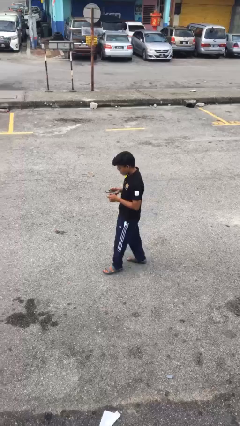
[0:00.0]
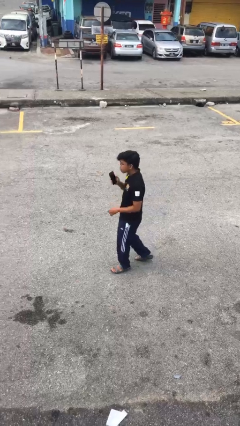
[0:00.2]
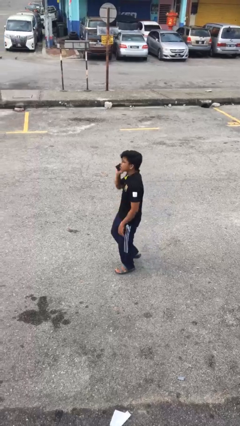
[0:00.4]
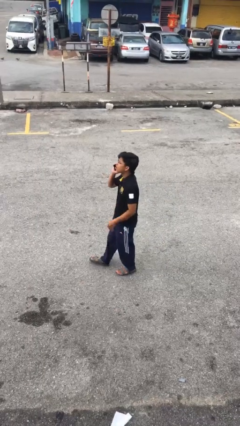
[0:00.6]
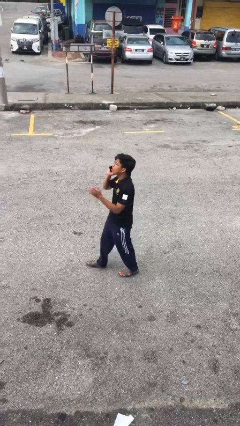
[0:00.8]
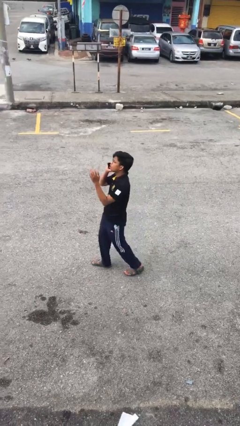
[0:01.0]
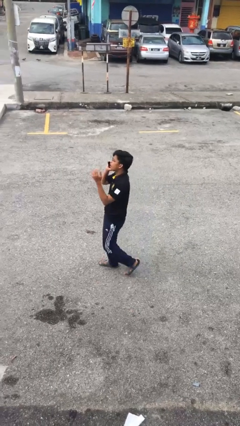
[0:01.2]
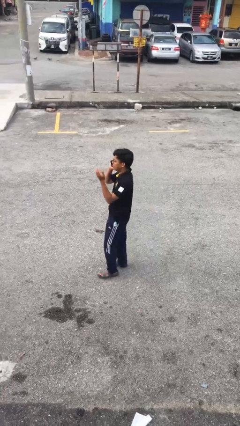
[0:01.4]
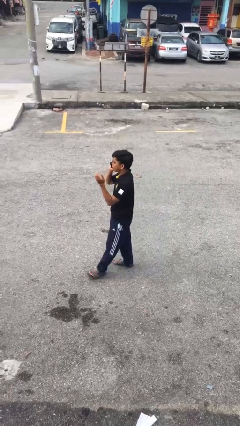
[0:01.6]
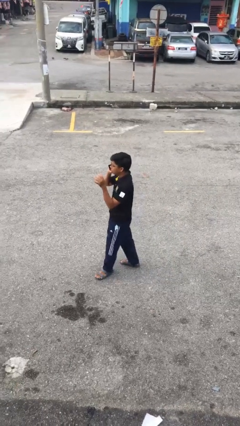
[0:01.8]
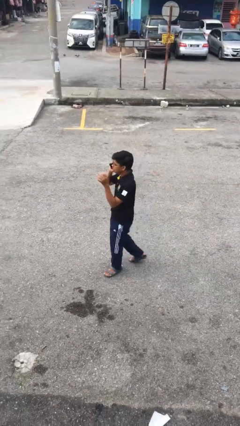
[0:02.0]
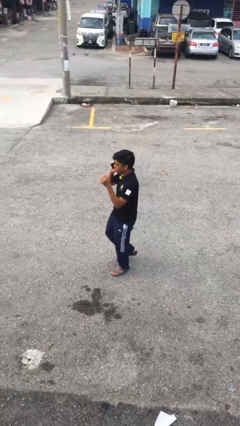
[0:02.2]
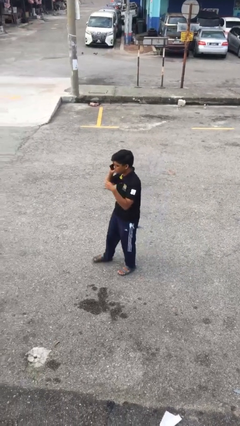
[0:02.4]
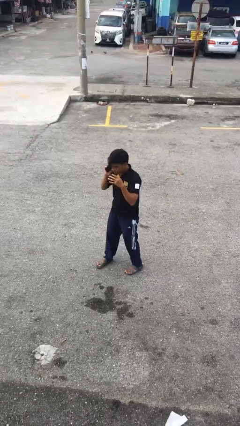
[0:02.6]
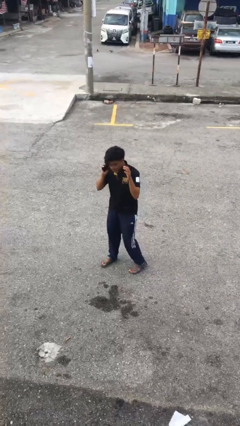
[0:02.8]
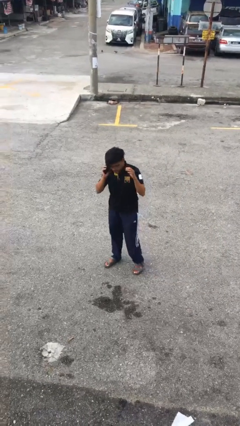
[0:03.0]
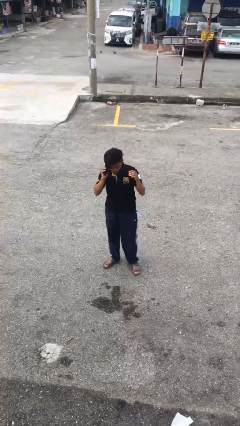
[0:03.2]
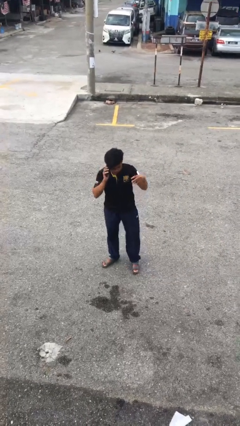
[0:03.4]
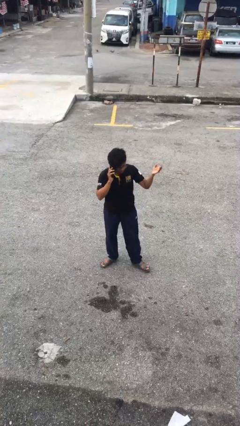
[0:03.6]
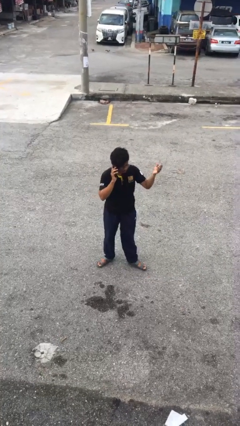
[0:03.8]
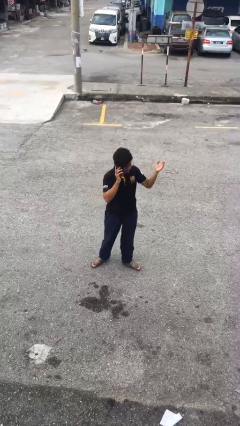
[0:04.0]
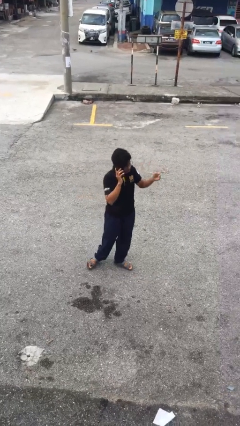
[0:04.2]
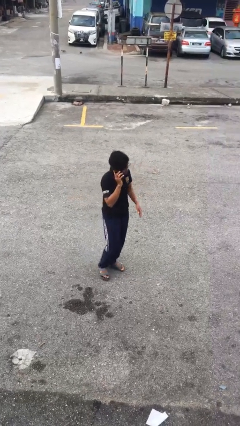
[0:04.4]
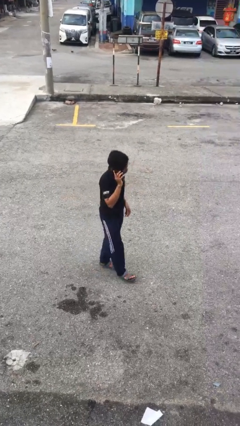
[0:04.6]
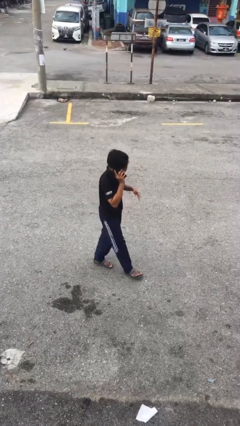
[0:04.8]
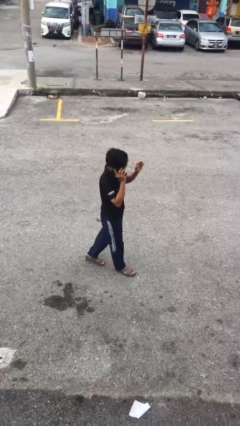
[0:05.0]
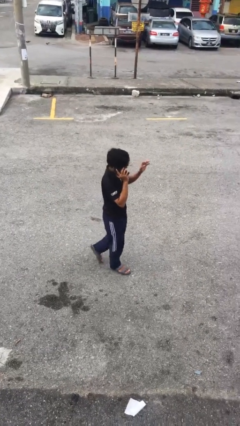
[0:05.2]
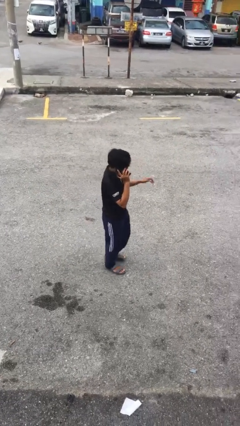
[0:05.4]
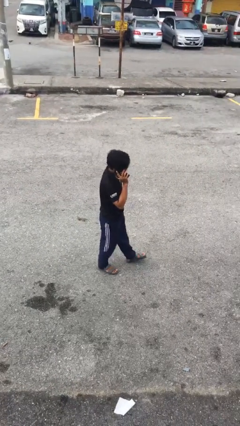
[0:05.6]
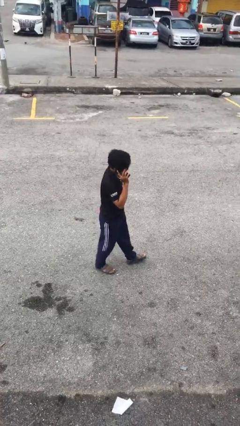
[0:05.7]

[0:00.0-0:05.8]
person talks on phone

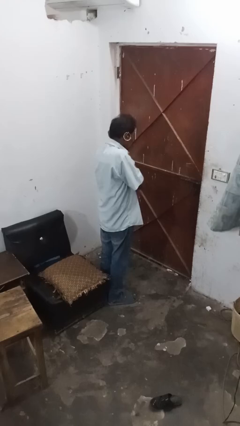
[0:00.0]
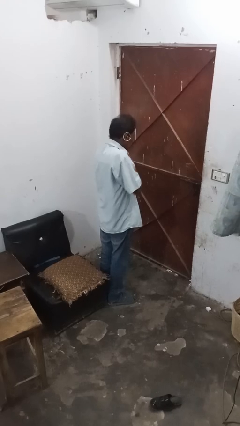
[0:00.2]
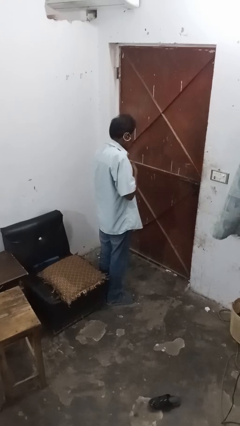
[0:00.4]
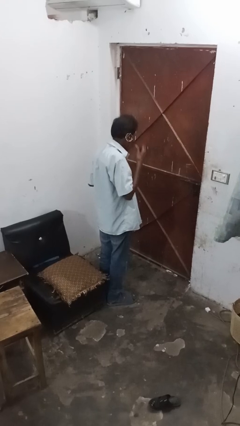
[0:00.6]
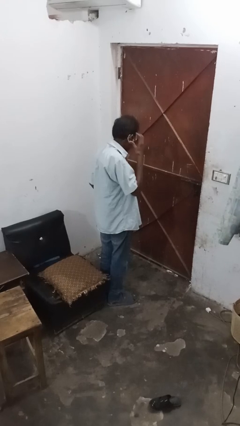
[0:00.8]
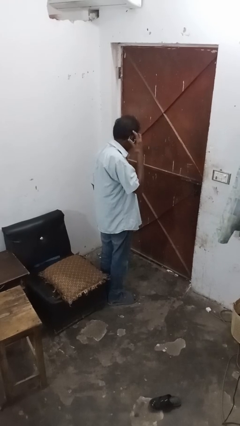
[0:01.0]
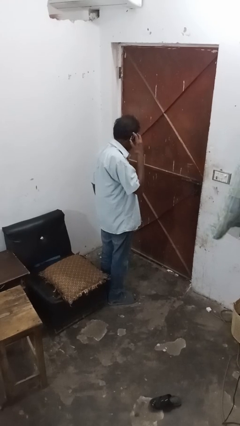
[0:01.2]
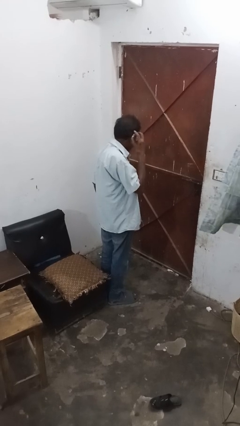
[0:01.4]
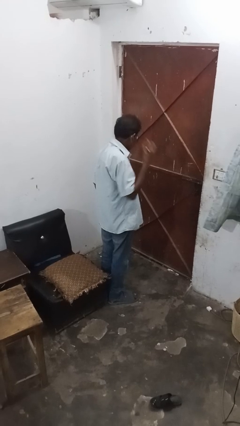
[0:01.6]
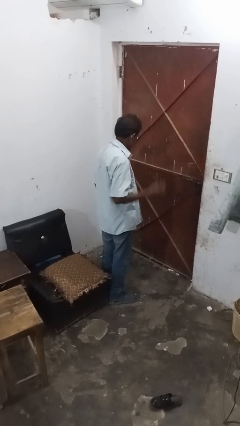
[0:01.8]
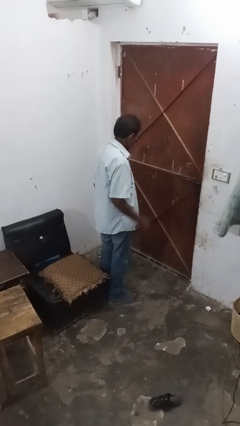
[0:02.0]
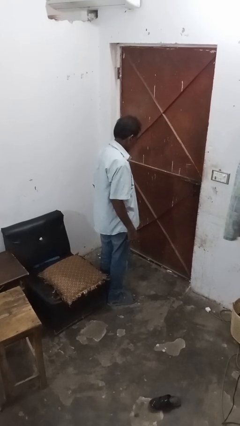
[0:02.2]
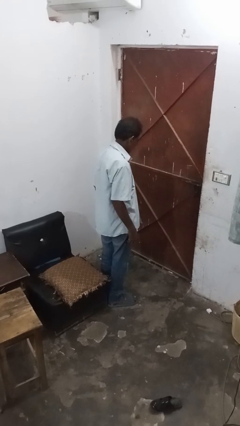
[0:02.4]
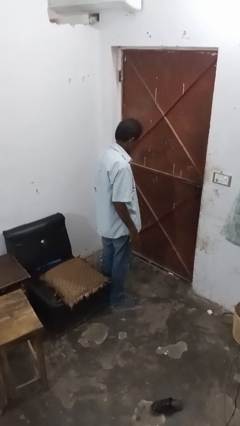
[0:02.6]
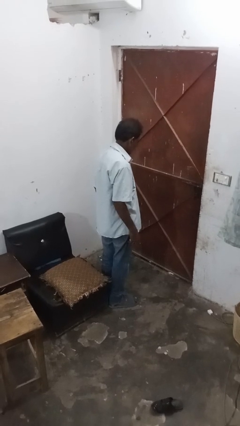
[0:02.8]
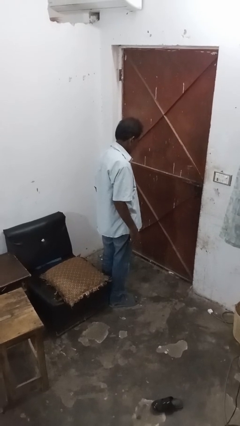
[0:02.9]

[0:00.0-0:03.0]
person takes off earrings

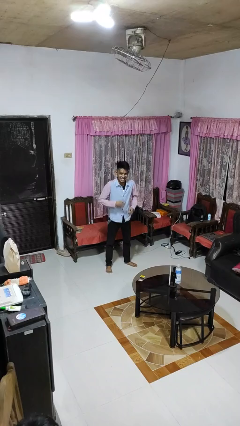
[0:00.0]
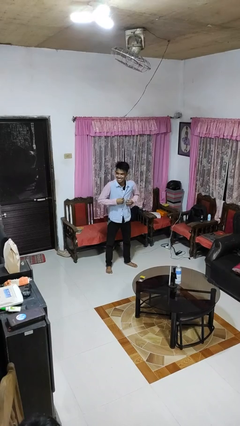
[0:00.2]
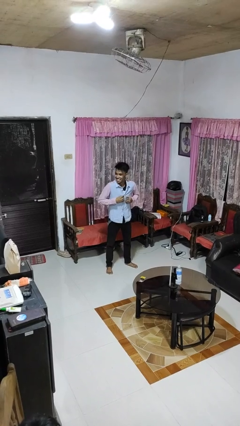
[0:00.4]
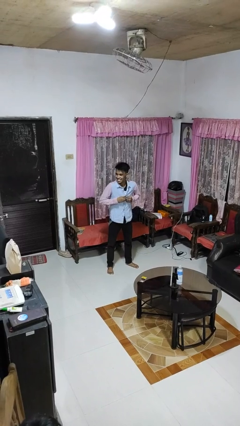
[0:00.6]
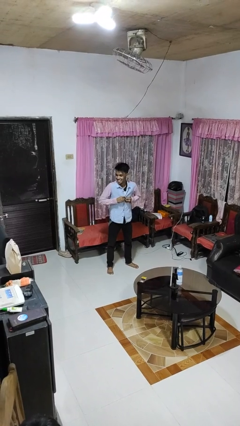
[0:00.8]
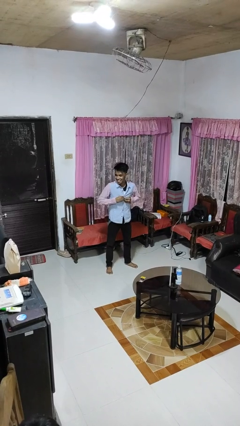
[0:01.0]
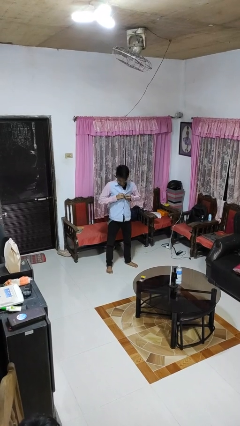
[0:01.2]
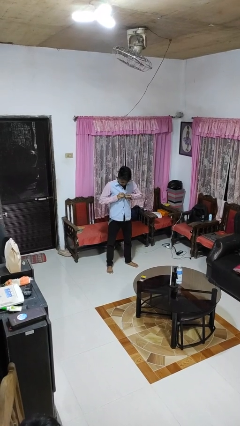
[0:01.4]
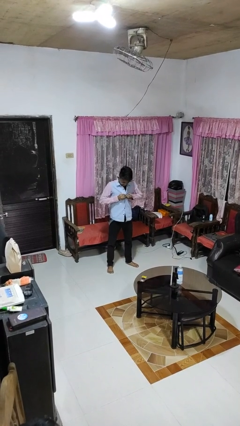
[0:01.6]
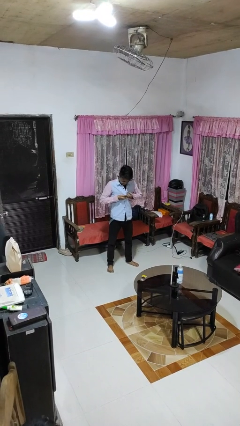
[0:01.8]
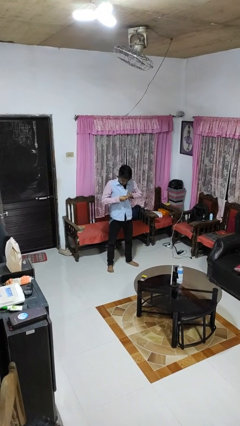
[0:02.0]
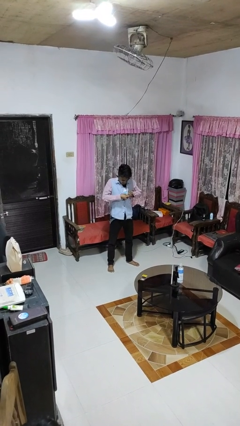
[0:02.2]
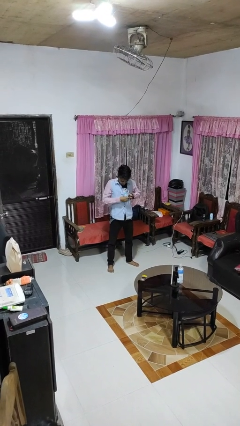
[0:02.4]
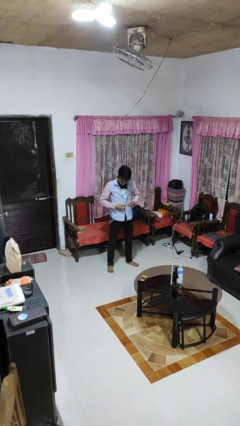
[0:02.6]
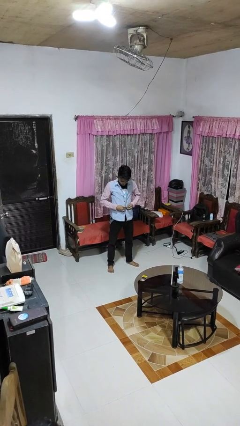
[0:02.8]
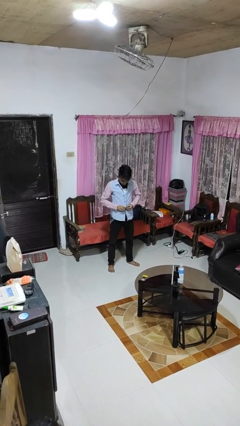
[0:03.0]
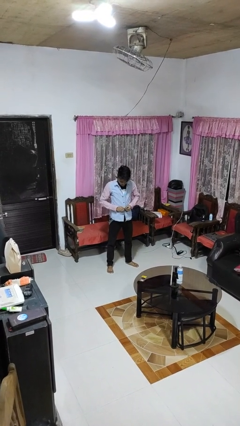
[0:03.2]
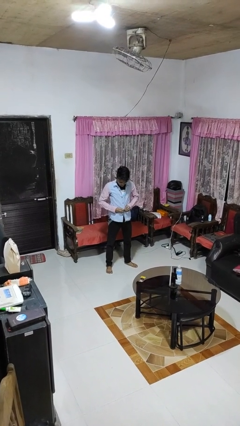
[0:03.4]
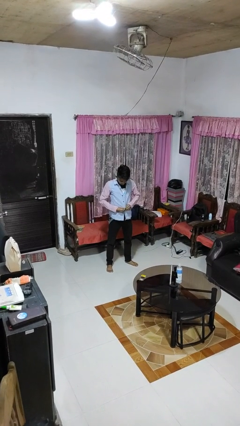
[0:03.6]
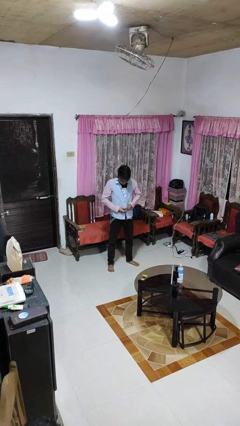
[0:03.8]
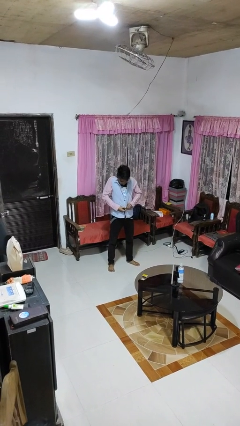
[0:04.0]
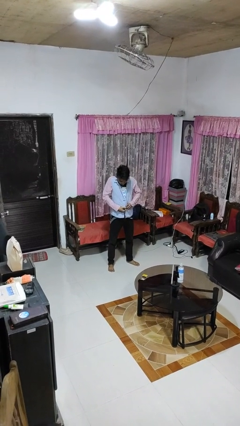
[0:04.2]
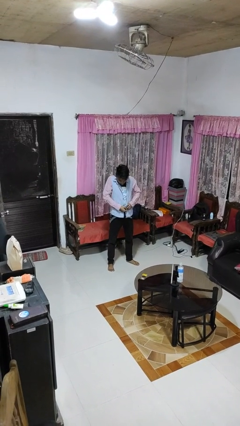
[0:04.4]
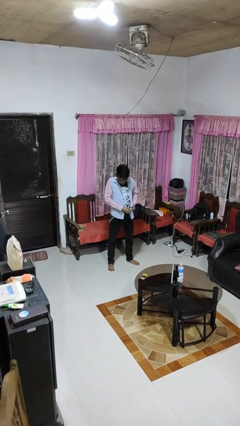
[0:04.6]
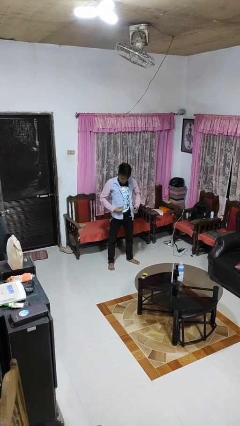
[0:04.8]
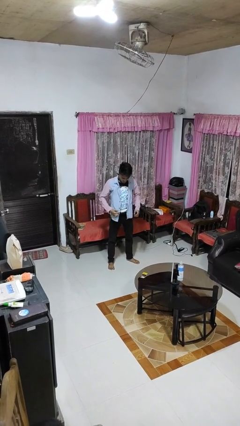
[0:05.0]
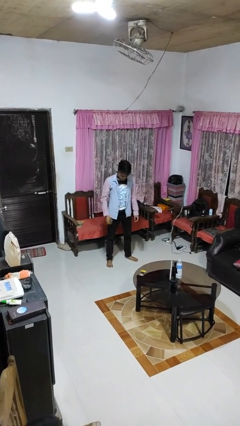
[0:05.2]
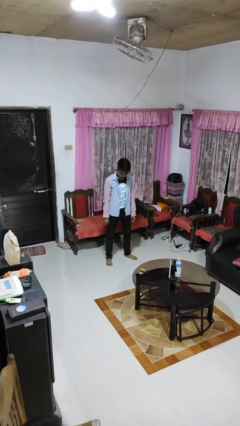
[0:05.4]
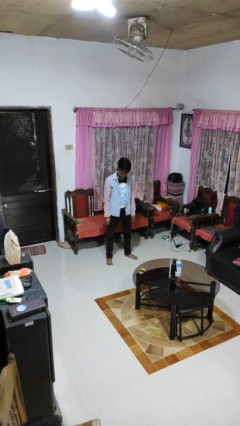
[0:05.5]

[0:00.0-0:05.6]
person unbuttons shirt

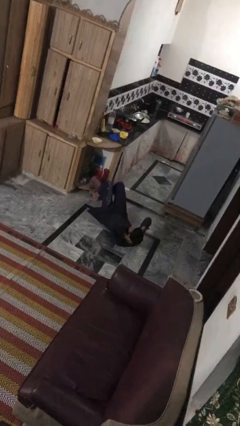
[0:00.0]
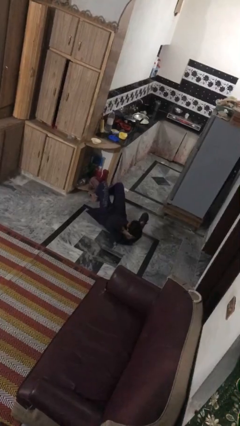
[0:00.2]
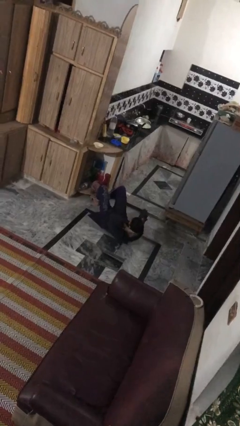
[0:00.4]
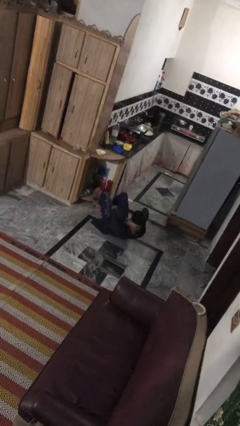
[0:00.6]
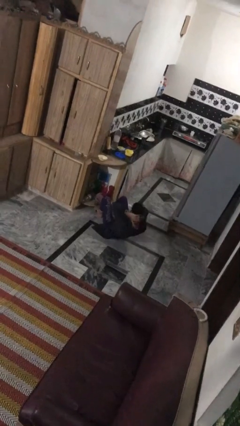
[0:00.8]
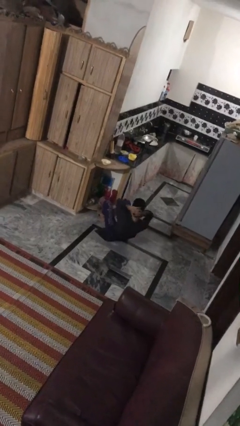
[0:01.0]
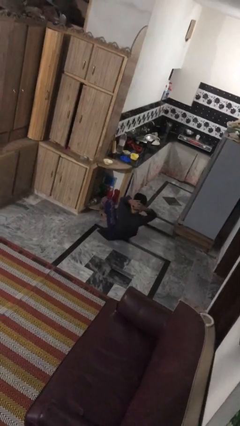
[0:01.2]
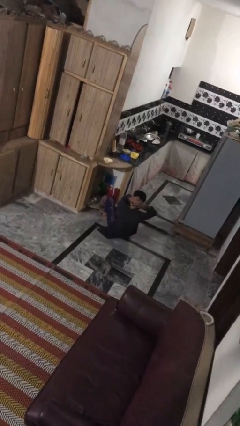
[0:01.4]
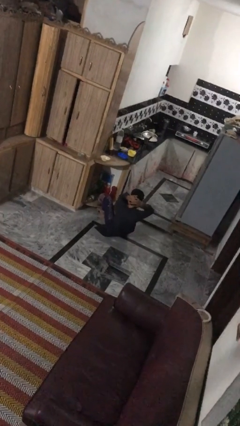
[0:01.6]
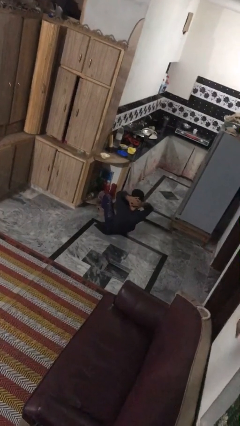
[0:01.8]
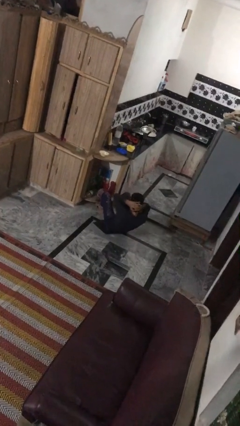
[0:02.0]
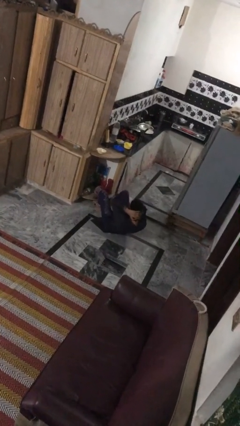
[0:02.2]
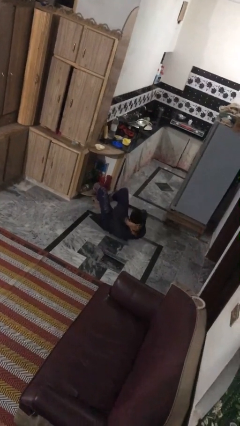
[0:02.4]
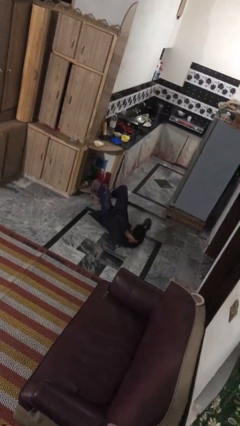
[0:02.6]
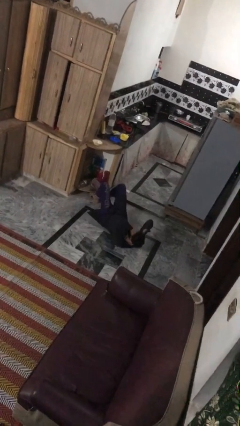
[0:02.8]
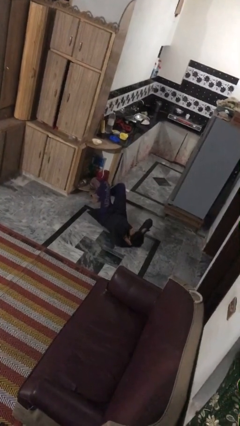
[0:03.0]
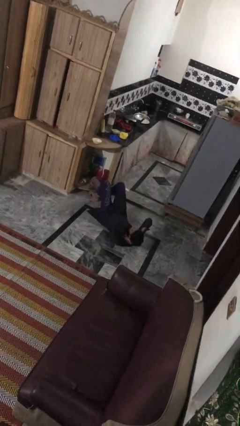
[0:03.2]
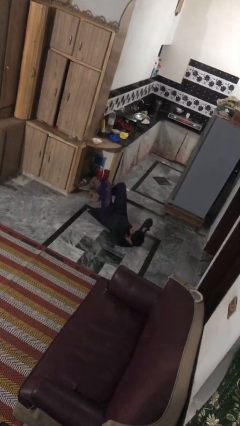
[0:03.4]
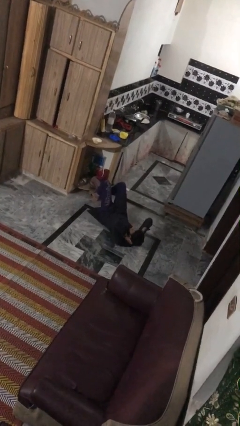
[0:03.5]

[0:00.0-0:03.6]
person exercises with situp

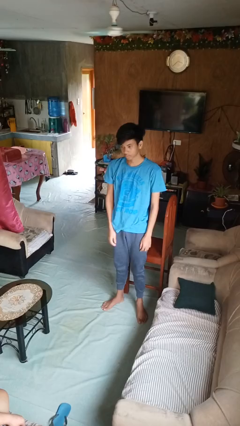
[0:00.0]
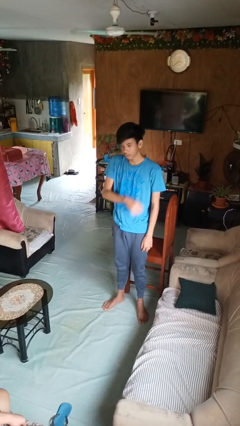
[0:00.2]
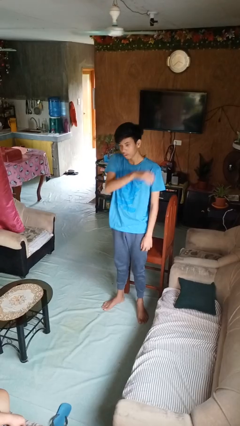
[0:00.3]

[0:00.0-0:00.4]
person sneezes into arm
